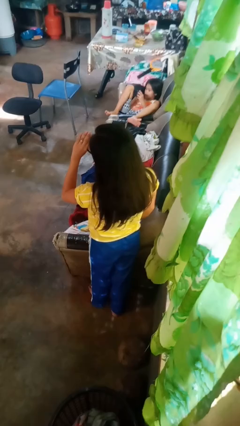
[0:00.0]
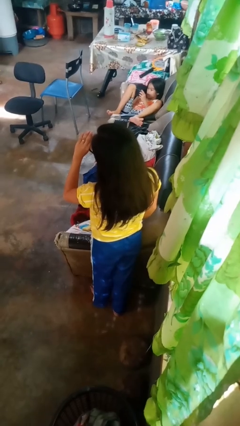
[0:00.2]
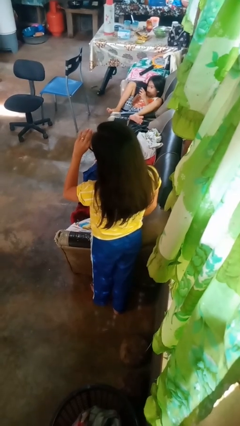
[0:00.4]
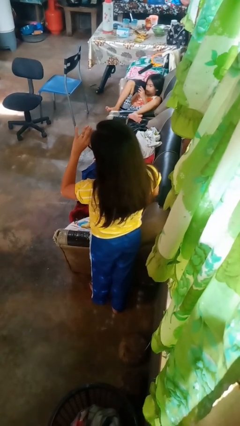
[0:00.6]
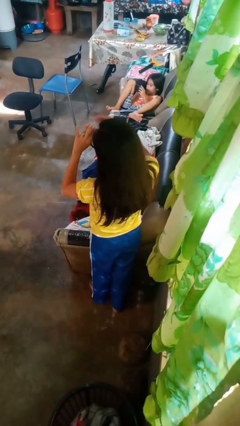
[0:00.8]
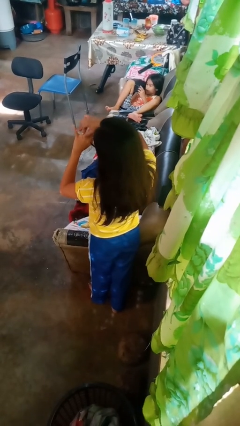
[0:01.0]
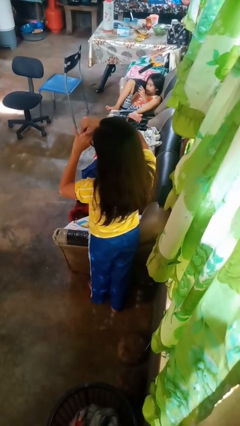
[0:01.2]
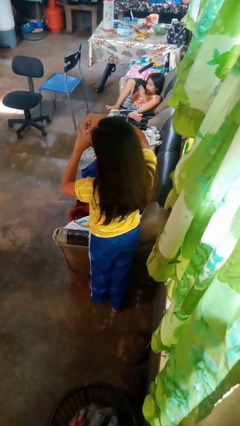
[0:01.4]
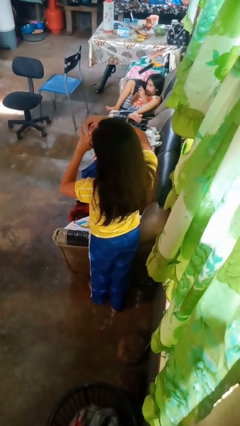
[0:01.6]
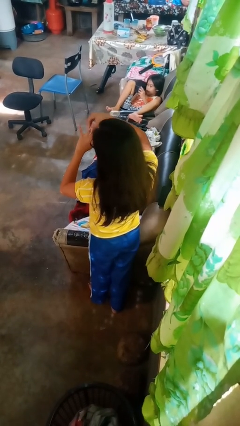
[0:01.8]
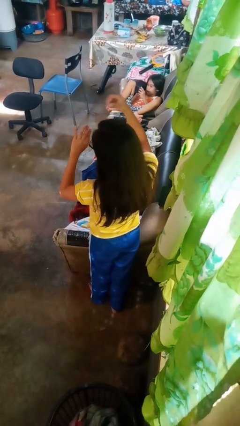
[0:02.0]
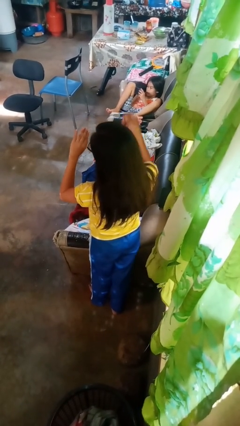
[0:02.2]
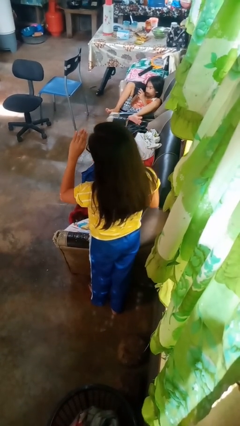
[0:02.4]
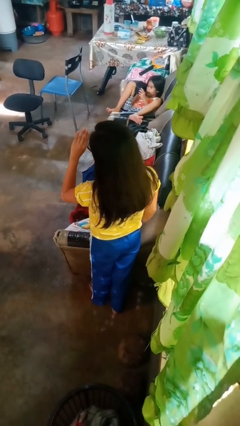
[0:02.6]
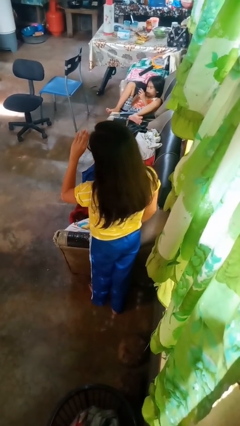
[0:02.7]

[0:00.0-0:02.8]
person takes off ring

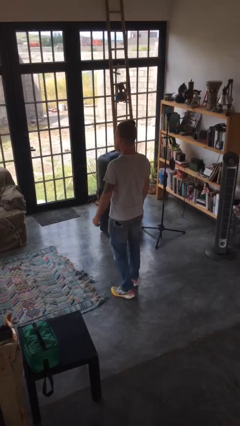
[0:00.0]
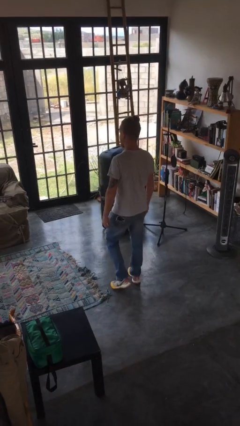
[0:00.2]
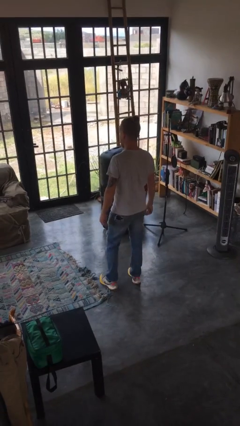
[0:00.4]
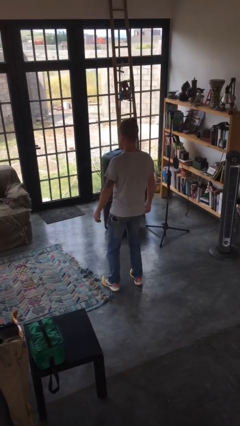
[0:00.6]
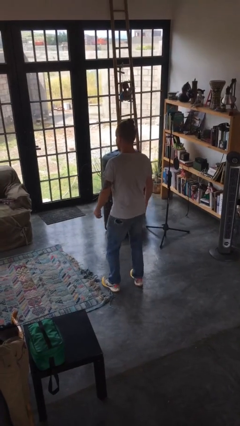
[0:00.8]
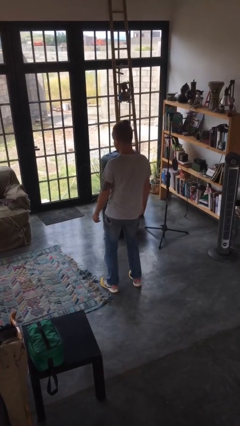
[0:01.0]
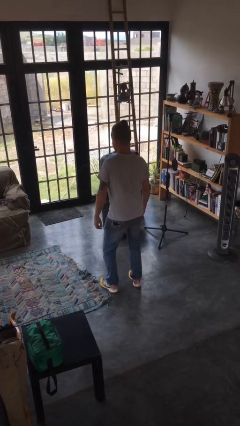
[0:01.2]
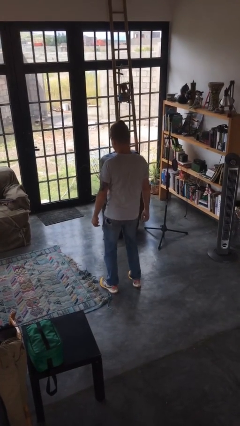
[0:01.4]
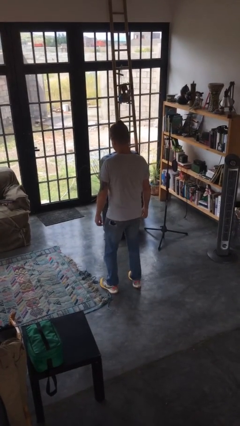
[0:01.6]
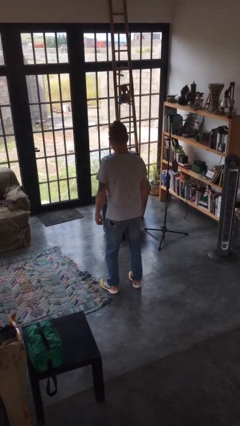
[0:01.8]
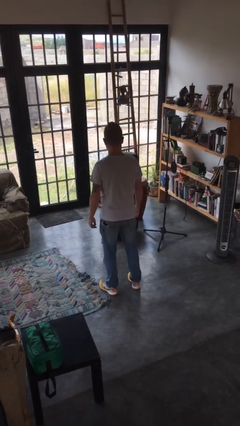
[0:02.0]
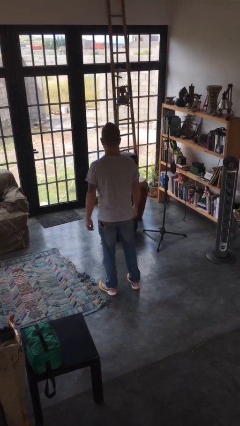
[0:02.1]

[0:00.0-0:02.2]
person wiggles hips

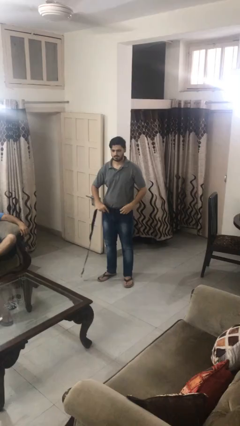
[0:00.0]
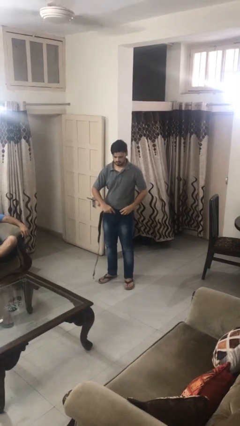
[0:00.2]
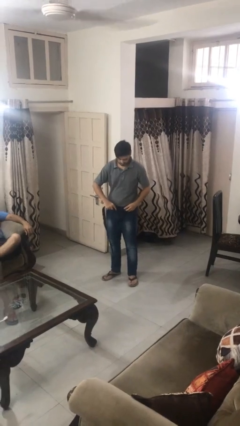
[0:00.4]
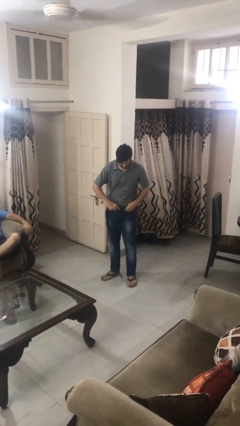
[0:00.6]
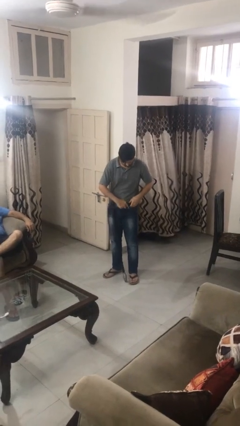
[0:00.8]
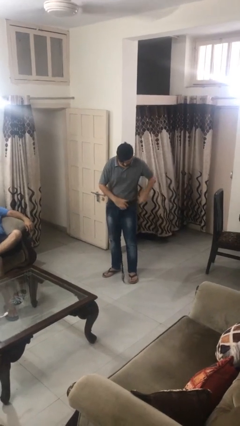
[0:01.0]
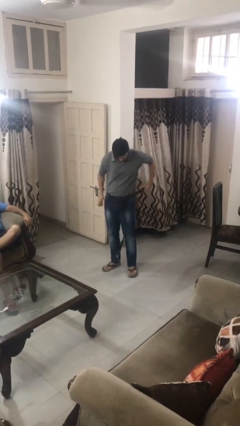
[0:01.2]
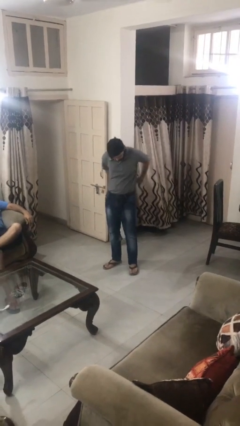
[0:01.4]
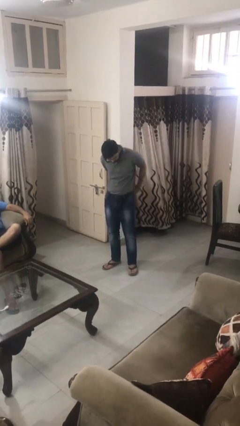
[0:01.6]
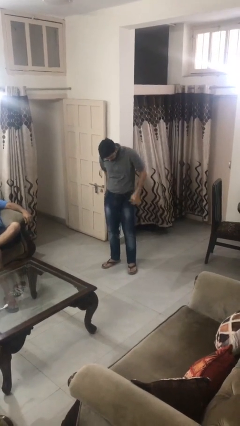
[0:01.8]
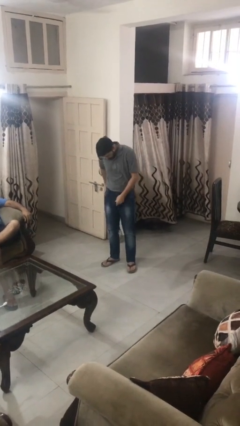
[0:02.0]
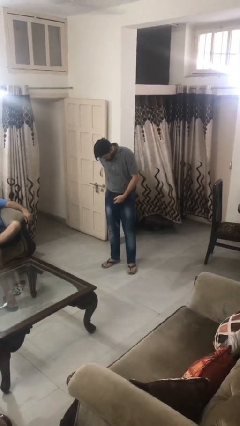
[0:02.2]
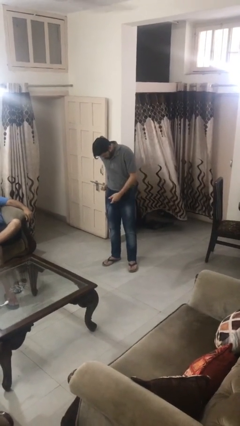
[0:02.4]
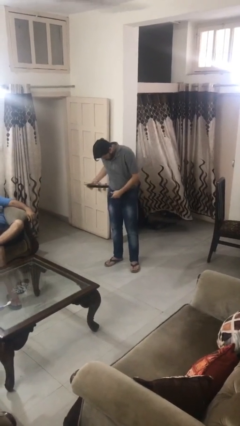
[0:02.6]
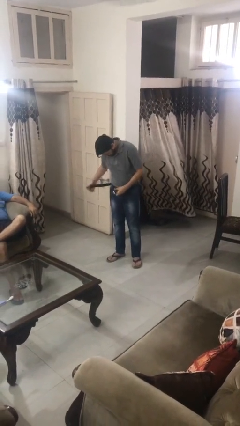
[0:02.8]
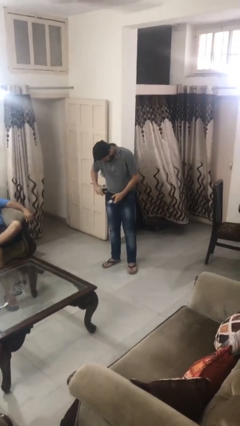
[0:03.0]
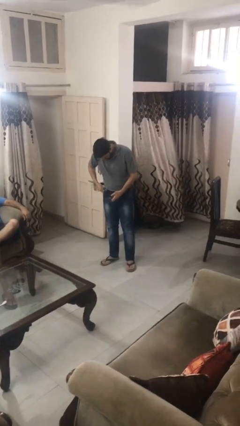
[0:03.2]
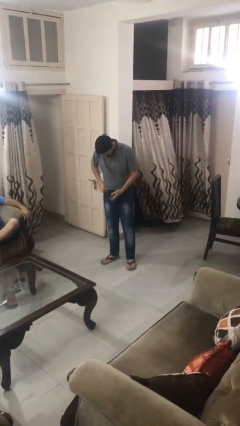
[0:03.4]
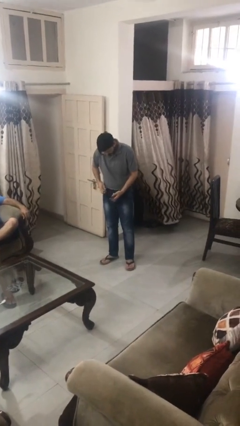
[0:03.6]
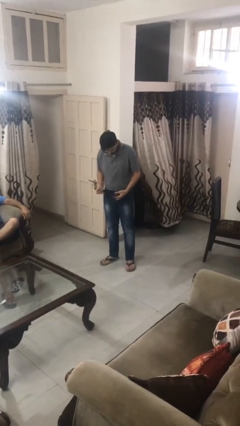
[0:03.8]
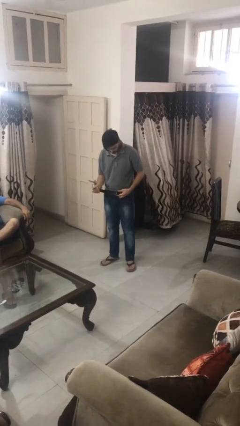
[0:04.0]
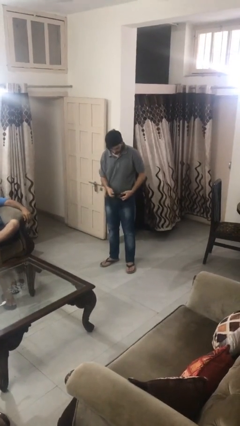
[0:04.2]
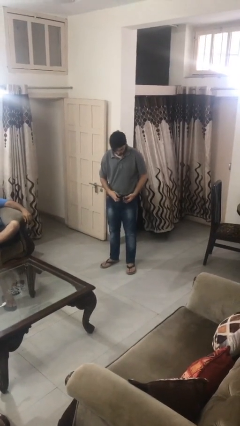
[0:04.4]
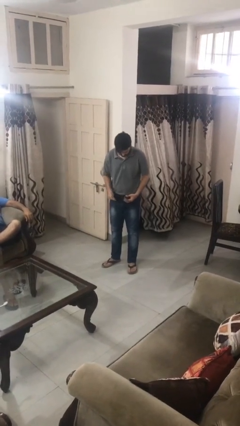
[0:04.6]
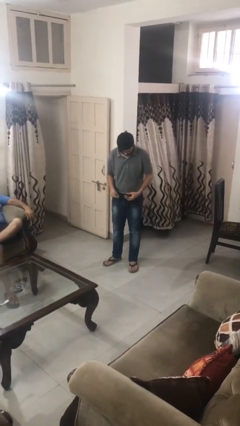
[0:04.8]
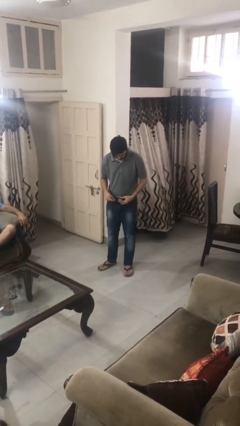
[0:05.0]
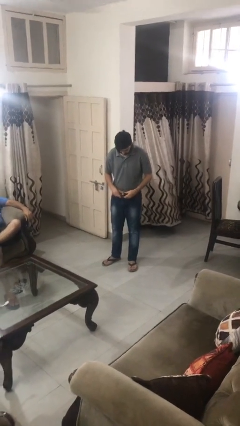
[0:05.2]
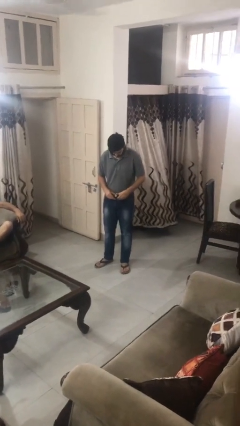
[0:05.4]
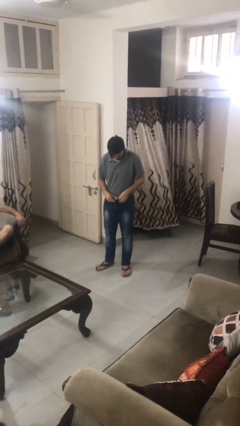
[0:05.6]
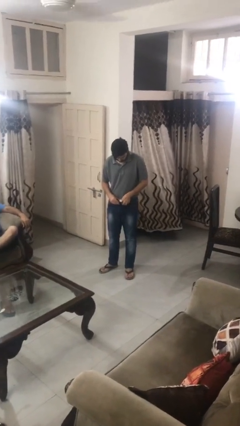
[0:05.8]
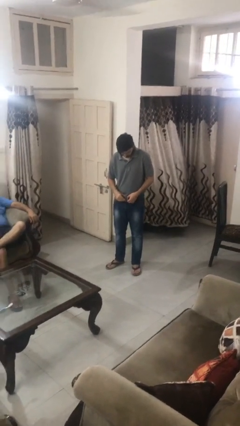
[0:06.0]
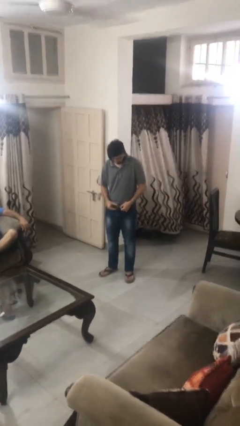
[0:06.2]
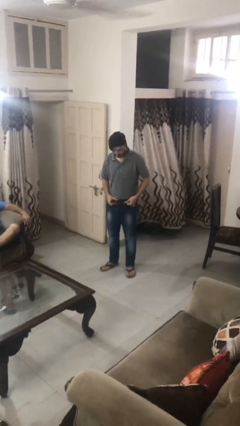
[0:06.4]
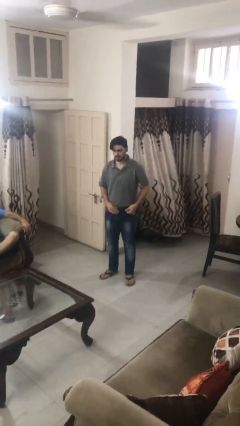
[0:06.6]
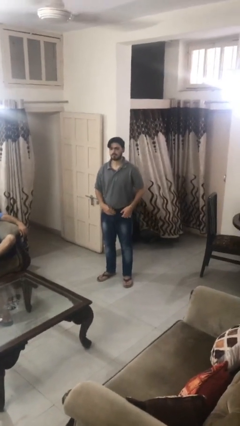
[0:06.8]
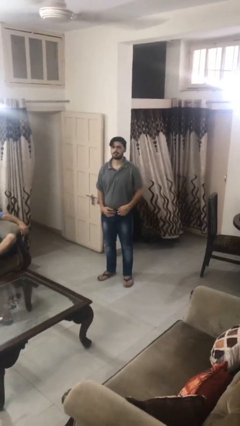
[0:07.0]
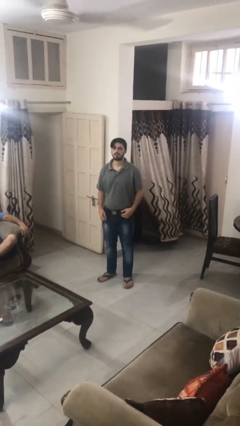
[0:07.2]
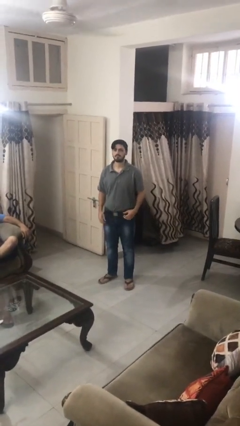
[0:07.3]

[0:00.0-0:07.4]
person puts on belt

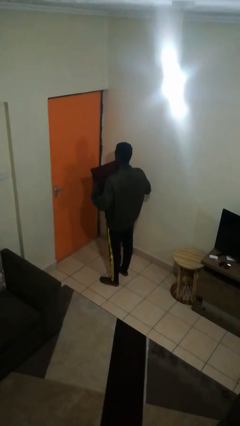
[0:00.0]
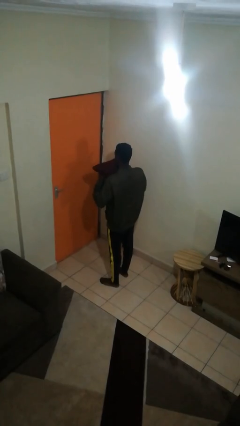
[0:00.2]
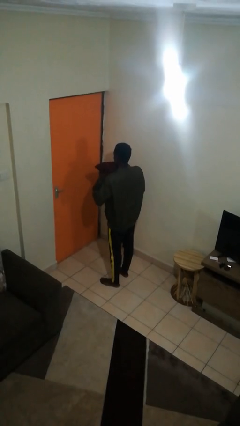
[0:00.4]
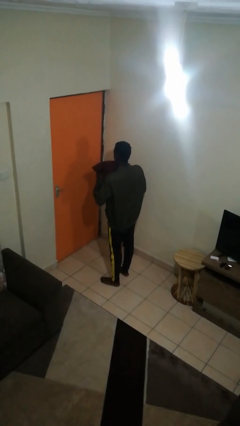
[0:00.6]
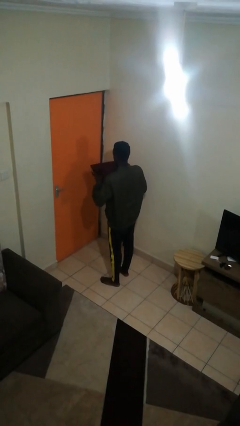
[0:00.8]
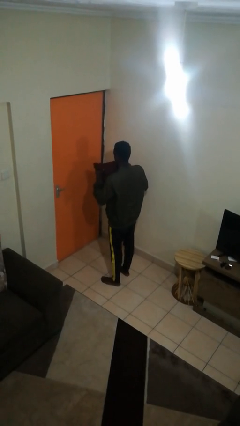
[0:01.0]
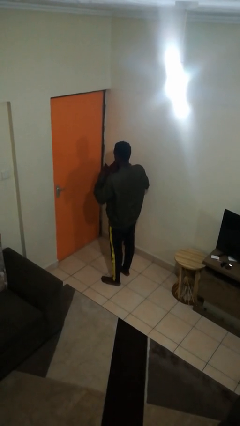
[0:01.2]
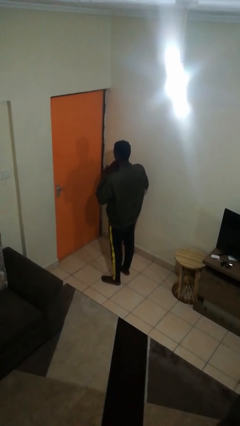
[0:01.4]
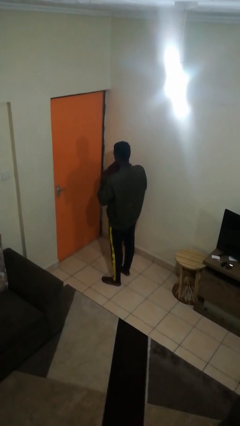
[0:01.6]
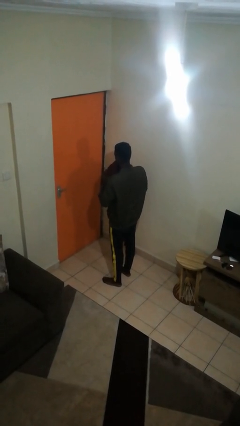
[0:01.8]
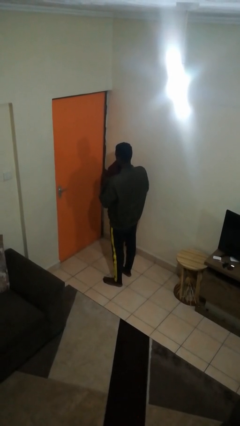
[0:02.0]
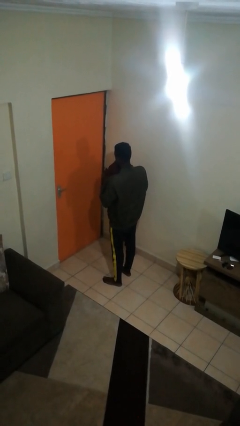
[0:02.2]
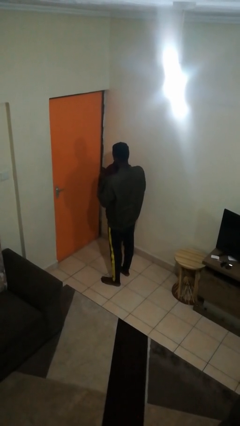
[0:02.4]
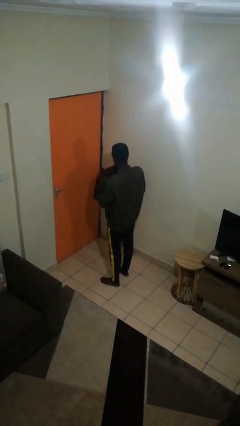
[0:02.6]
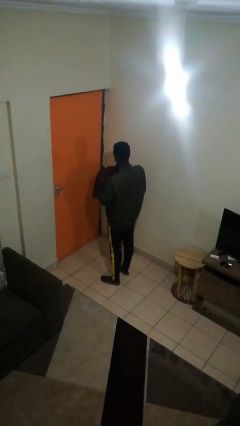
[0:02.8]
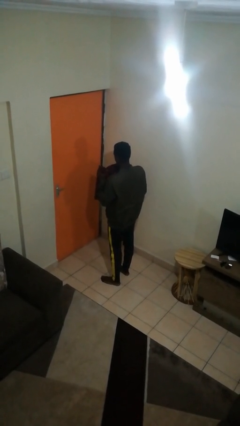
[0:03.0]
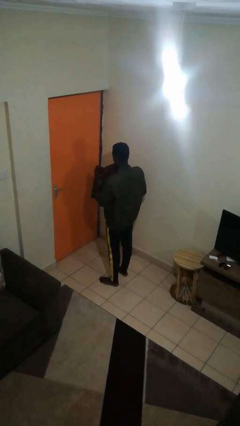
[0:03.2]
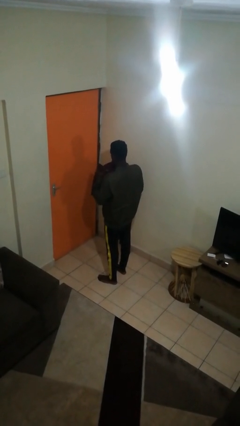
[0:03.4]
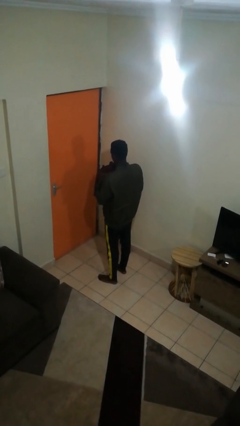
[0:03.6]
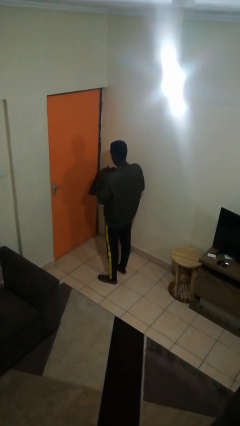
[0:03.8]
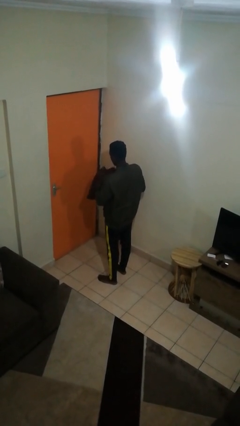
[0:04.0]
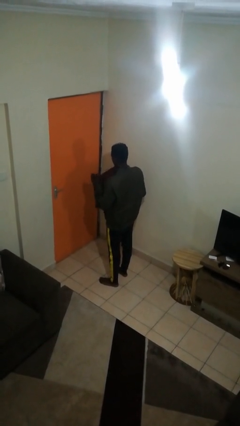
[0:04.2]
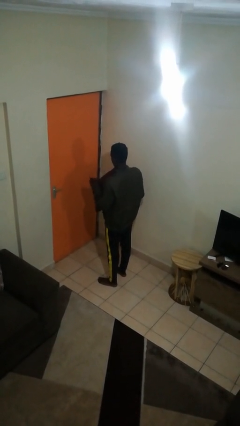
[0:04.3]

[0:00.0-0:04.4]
person squeezes object

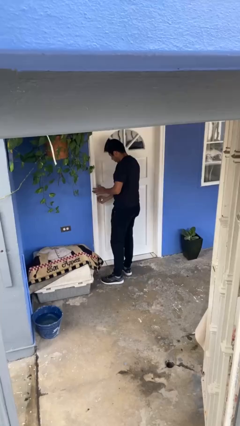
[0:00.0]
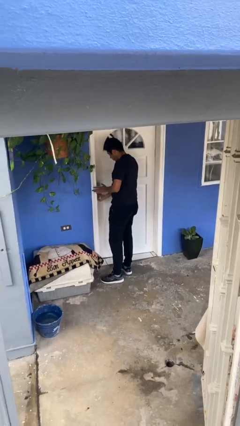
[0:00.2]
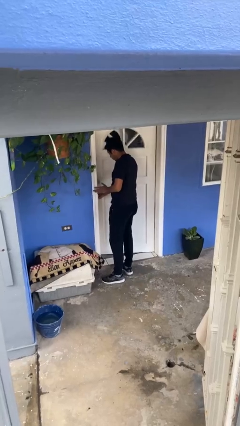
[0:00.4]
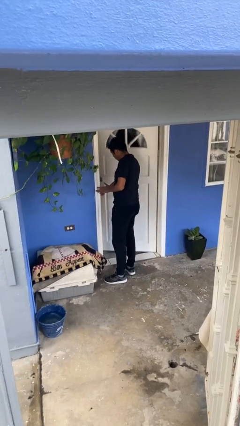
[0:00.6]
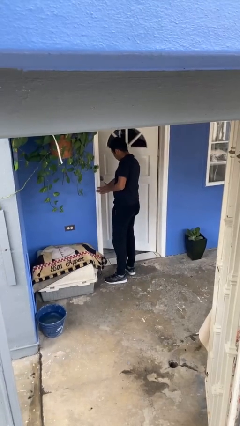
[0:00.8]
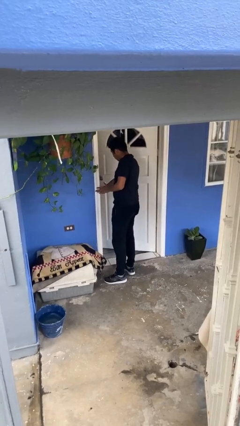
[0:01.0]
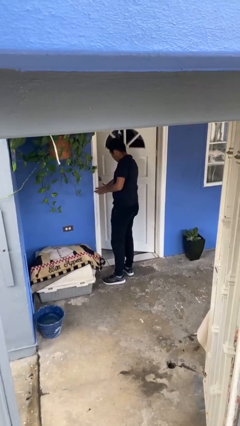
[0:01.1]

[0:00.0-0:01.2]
person opens facility door
